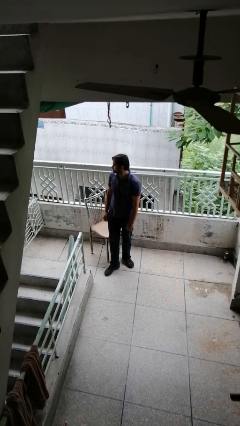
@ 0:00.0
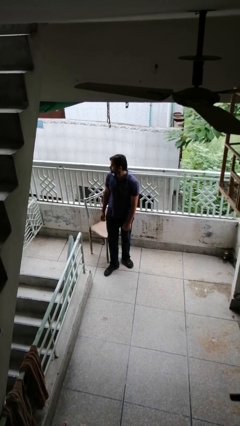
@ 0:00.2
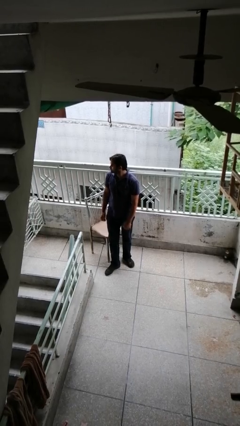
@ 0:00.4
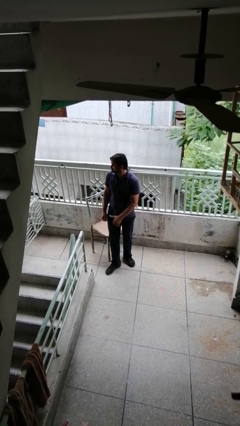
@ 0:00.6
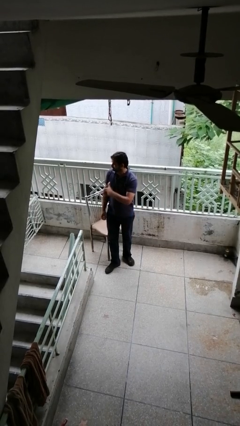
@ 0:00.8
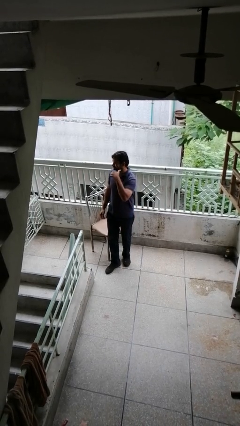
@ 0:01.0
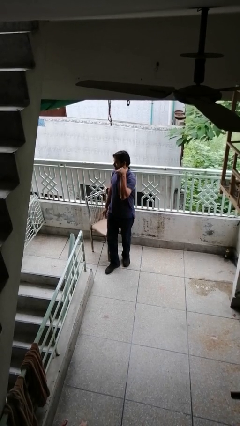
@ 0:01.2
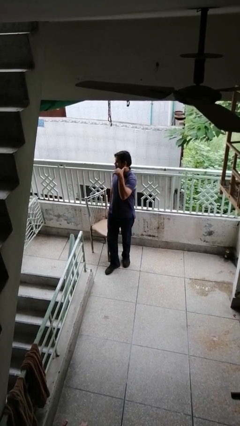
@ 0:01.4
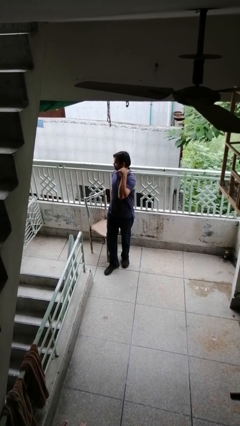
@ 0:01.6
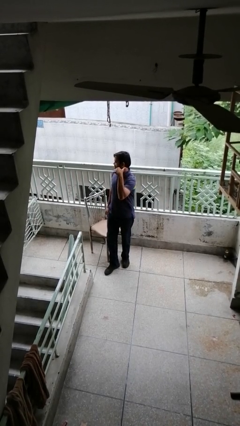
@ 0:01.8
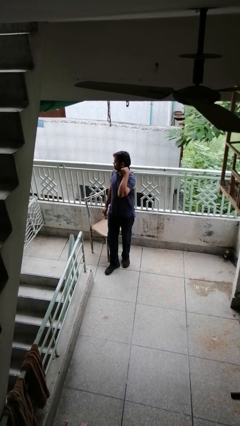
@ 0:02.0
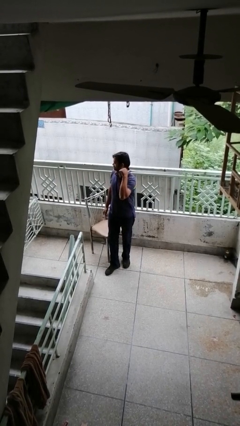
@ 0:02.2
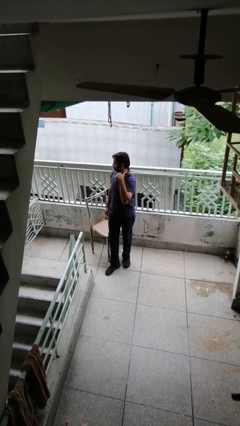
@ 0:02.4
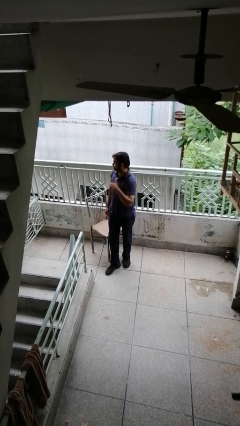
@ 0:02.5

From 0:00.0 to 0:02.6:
person gestures behind me

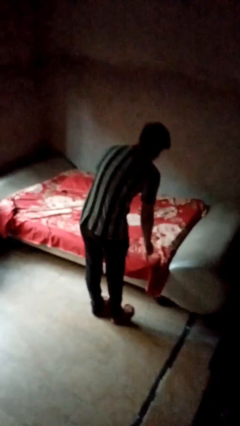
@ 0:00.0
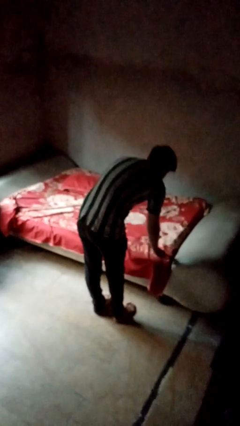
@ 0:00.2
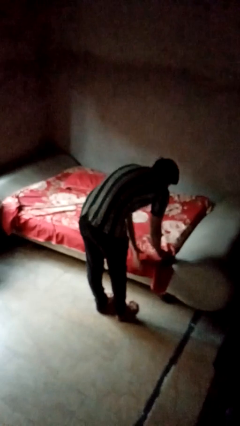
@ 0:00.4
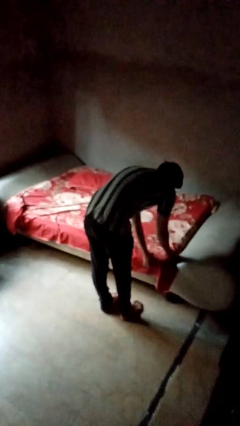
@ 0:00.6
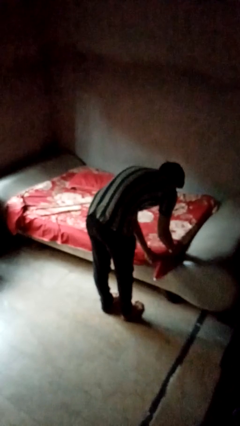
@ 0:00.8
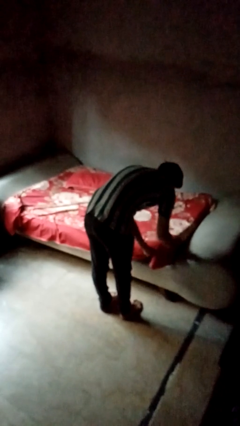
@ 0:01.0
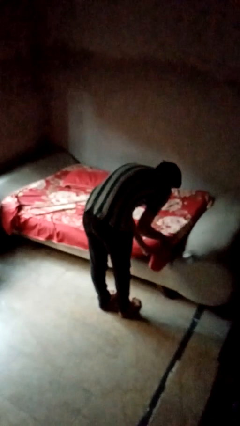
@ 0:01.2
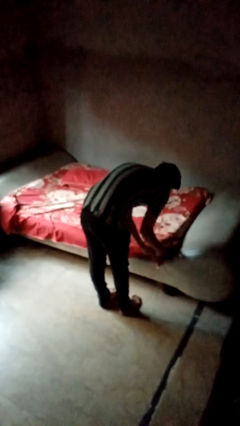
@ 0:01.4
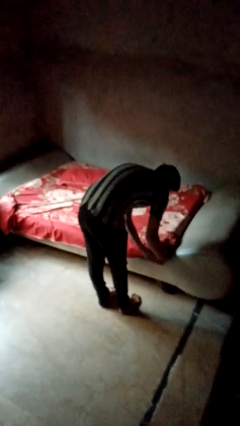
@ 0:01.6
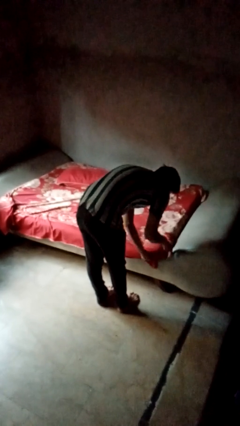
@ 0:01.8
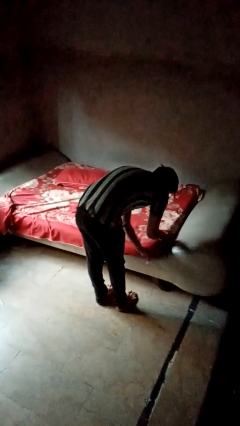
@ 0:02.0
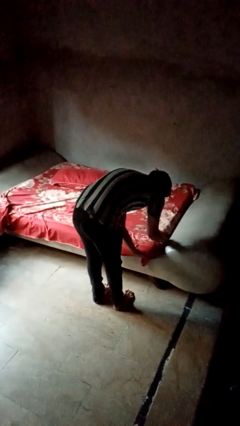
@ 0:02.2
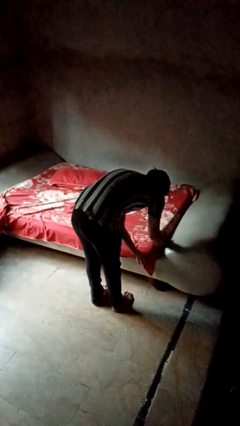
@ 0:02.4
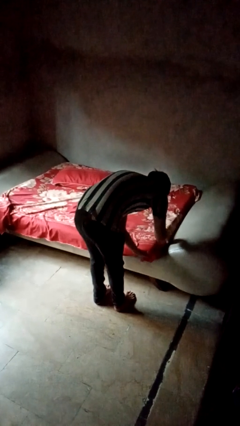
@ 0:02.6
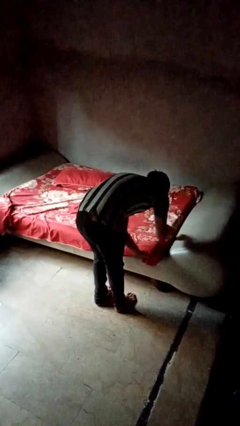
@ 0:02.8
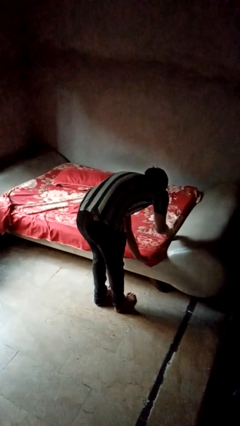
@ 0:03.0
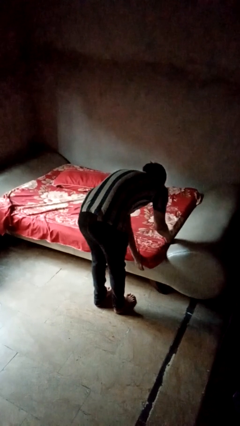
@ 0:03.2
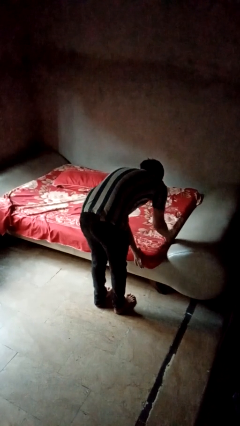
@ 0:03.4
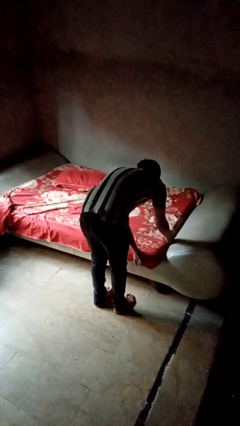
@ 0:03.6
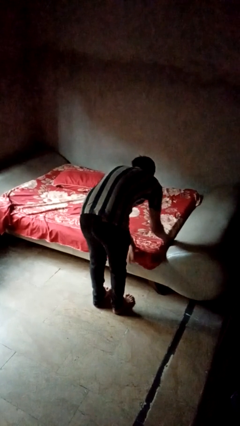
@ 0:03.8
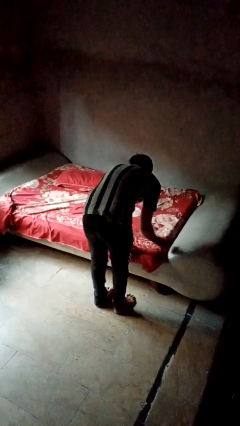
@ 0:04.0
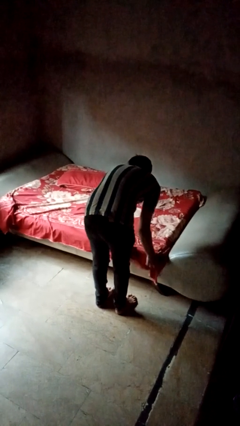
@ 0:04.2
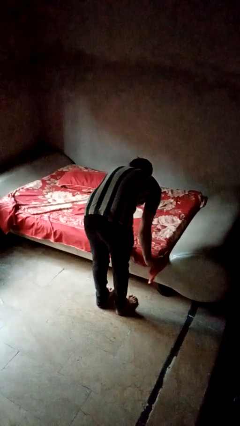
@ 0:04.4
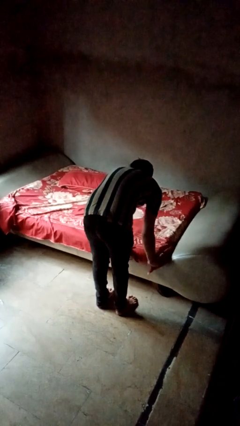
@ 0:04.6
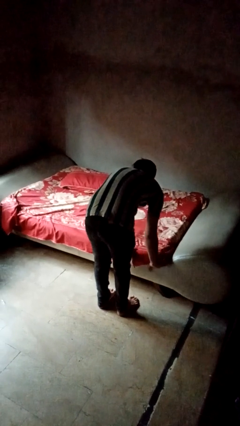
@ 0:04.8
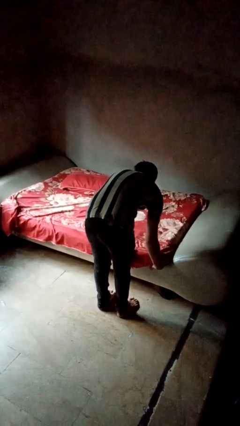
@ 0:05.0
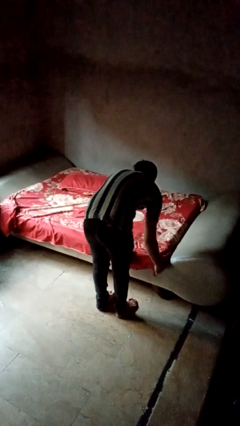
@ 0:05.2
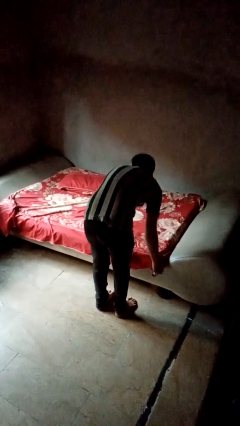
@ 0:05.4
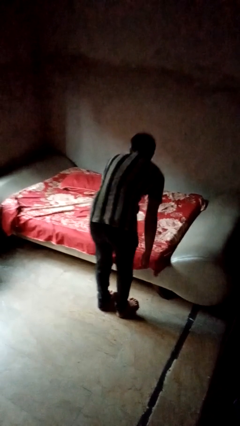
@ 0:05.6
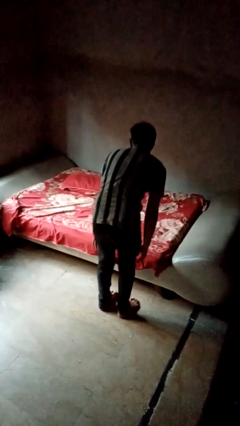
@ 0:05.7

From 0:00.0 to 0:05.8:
person makes bed

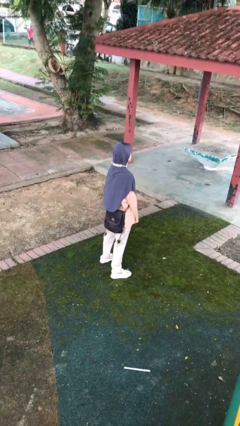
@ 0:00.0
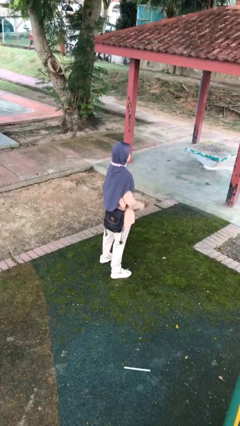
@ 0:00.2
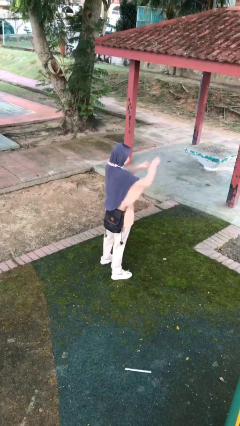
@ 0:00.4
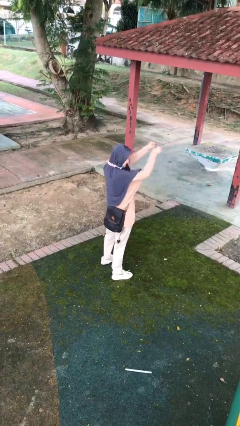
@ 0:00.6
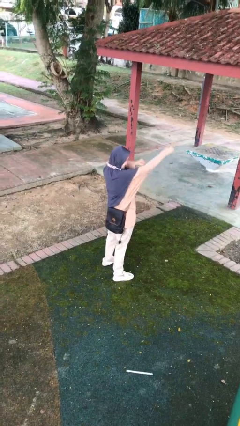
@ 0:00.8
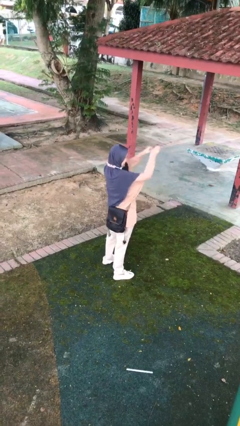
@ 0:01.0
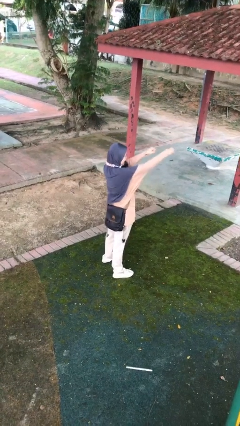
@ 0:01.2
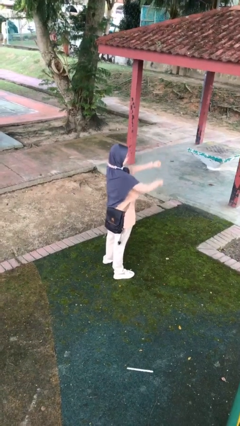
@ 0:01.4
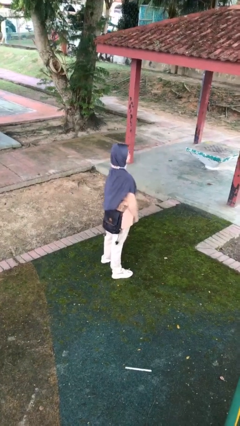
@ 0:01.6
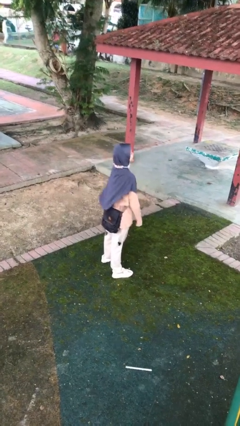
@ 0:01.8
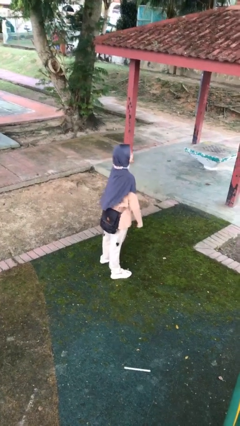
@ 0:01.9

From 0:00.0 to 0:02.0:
person punches

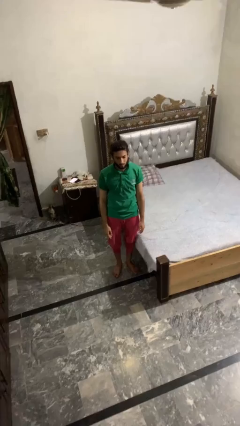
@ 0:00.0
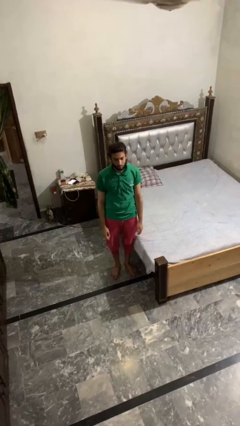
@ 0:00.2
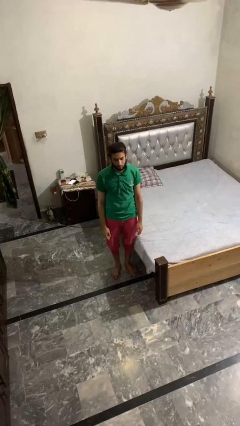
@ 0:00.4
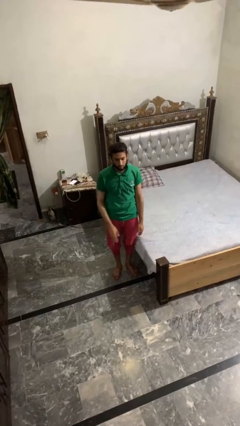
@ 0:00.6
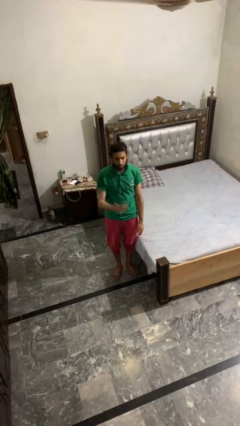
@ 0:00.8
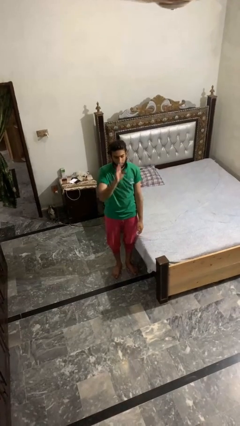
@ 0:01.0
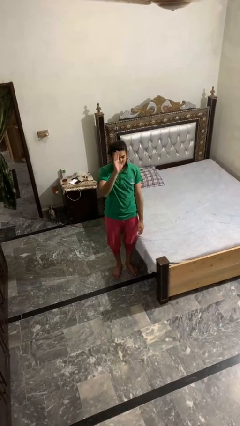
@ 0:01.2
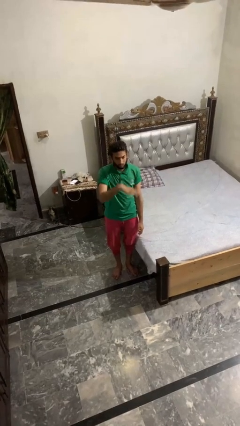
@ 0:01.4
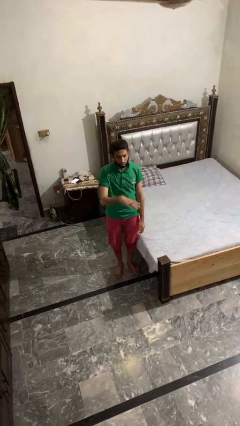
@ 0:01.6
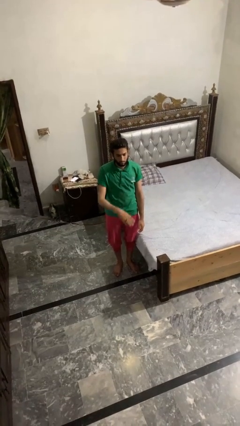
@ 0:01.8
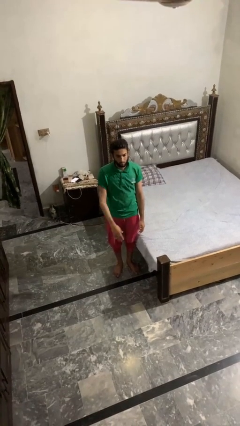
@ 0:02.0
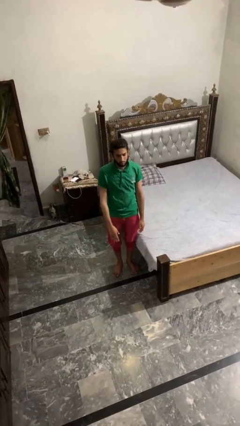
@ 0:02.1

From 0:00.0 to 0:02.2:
person gestures swipe down

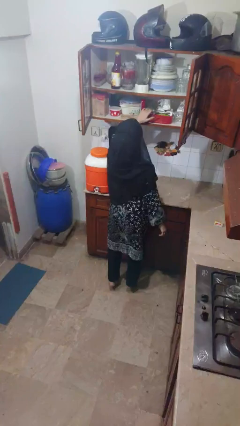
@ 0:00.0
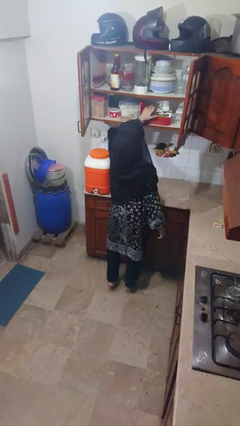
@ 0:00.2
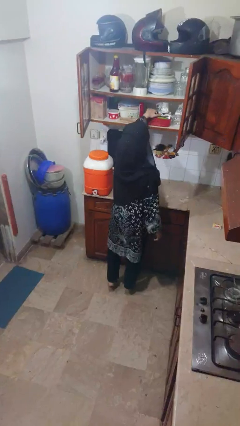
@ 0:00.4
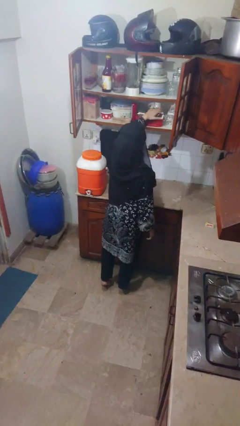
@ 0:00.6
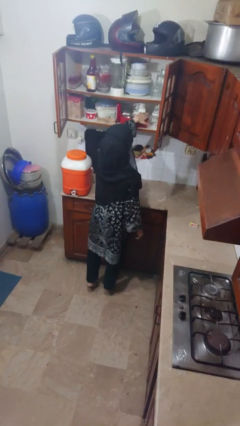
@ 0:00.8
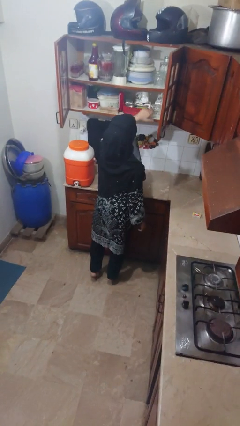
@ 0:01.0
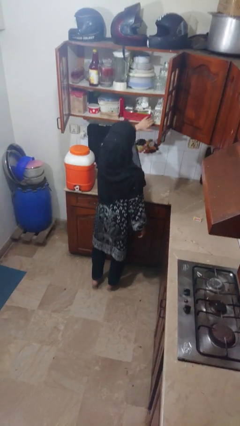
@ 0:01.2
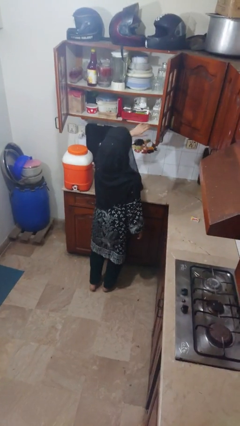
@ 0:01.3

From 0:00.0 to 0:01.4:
person searches in cabinet

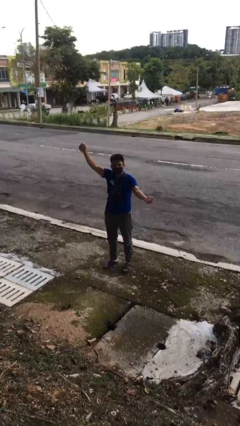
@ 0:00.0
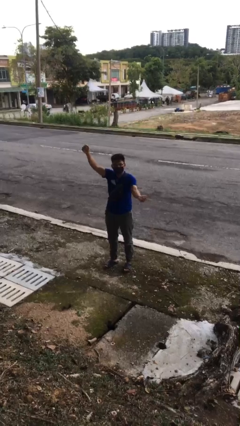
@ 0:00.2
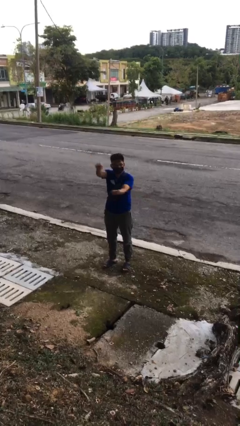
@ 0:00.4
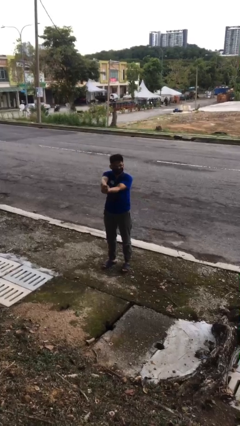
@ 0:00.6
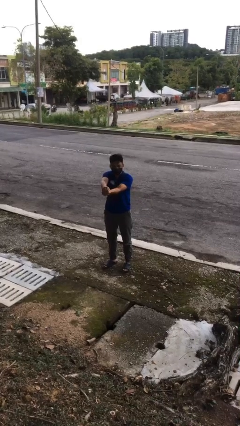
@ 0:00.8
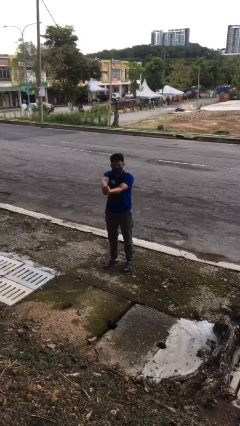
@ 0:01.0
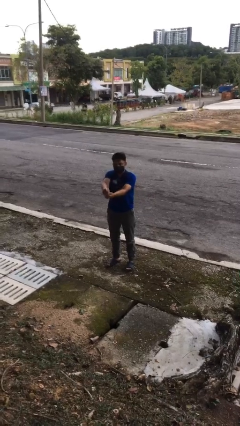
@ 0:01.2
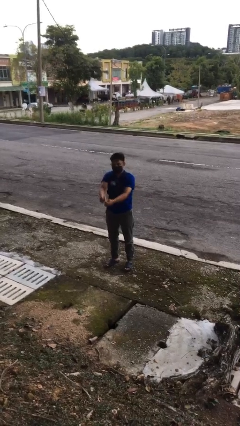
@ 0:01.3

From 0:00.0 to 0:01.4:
person gestures zoom out

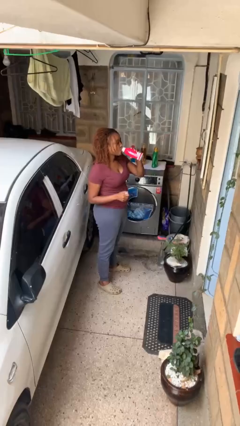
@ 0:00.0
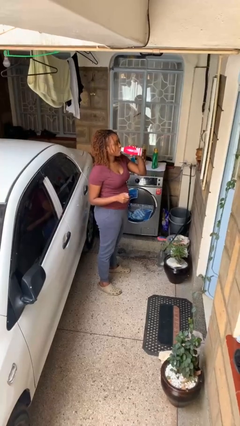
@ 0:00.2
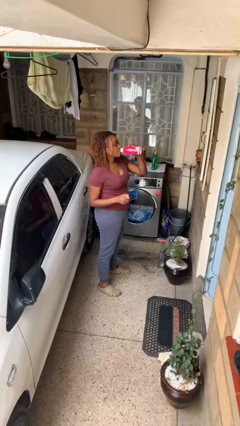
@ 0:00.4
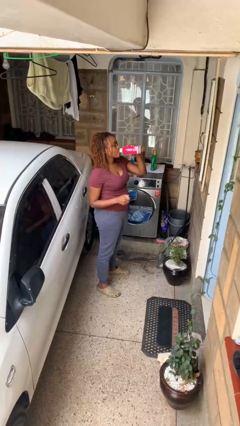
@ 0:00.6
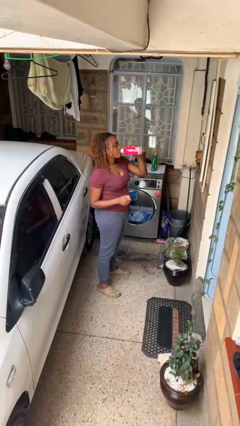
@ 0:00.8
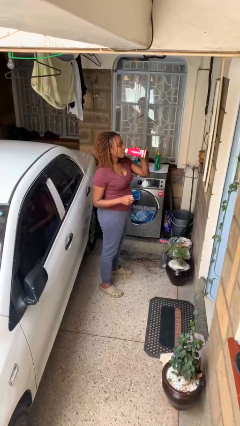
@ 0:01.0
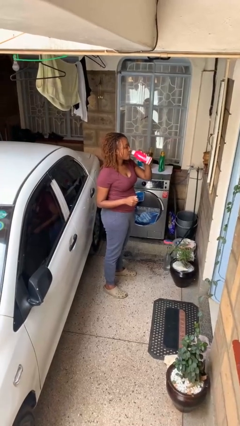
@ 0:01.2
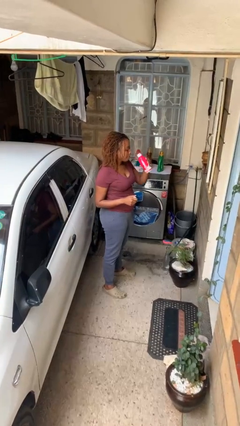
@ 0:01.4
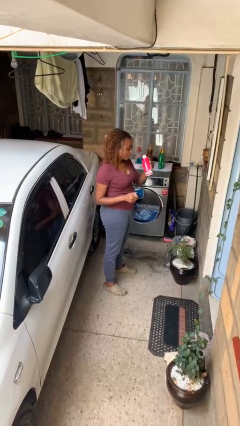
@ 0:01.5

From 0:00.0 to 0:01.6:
person drinks from beverage can

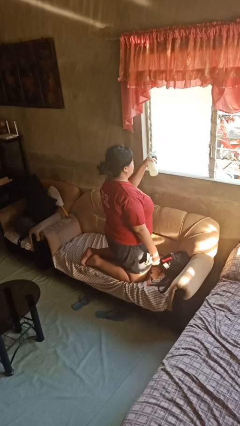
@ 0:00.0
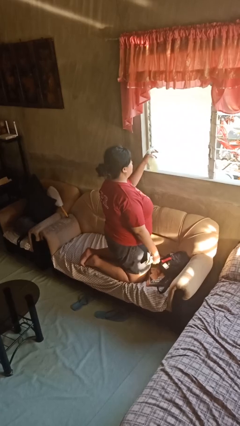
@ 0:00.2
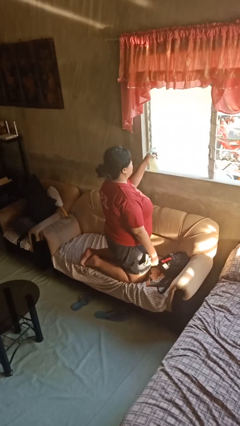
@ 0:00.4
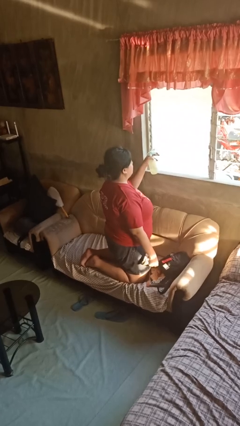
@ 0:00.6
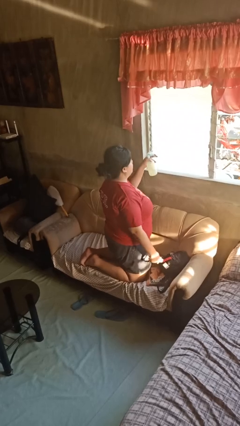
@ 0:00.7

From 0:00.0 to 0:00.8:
person sprays from bottle
